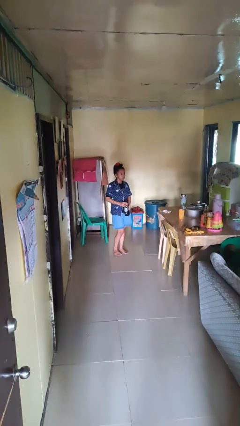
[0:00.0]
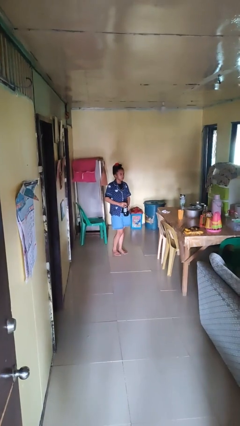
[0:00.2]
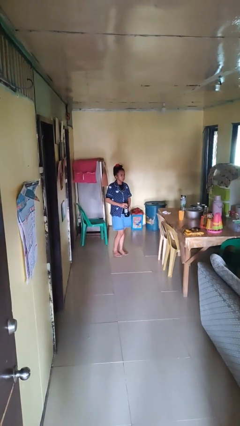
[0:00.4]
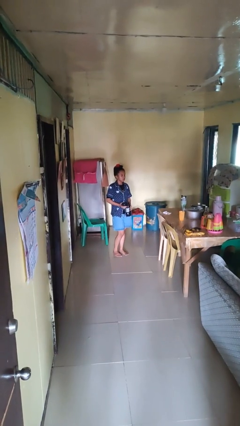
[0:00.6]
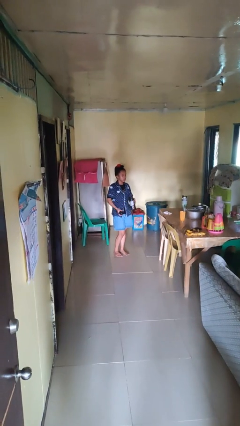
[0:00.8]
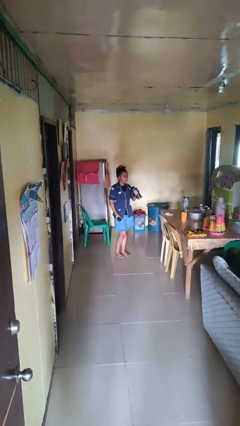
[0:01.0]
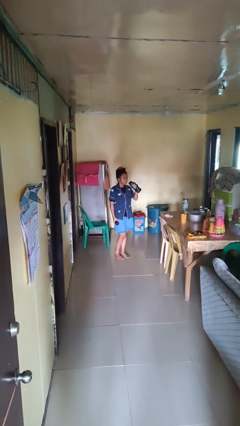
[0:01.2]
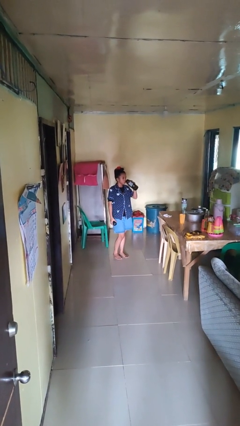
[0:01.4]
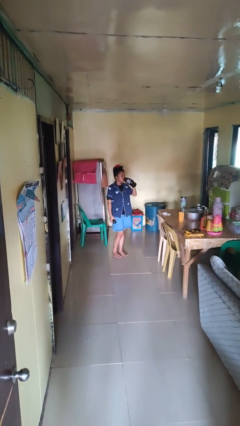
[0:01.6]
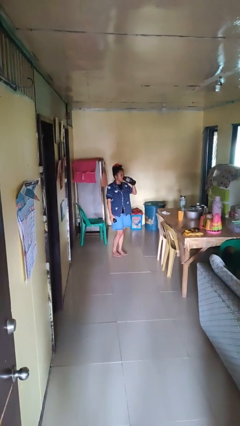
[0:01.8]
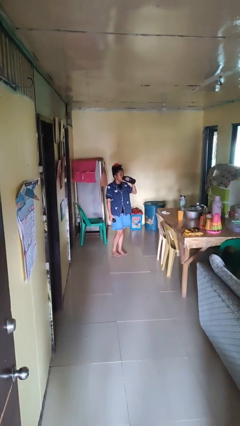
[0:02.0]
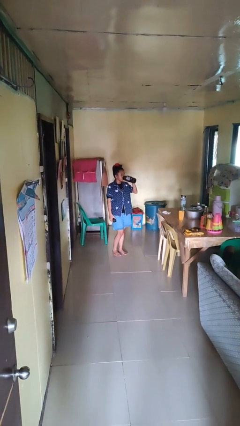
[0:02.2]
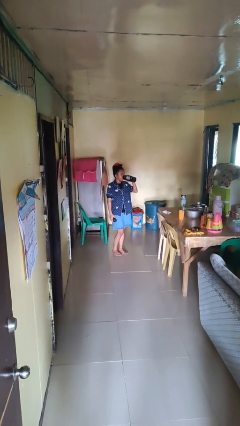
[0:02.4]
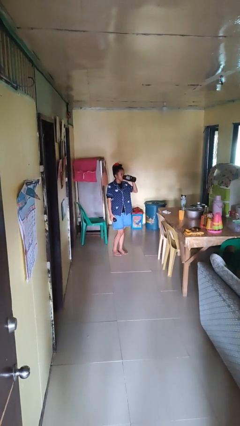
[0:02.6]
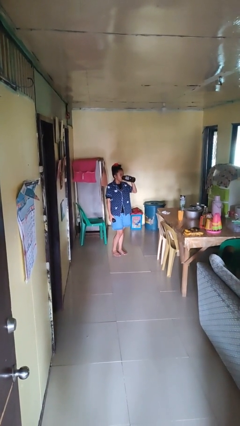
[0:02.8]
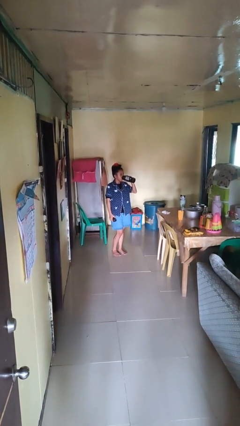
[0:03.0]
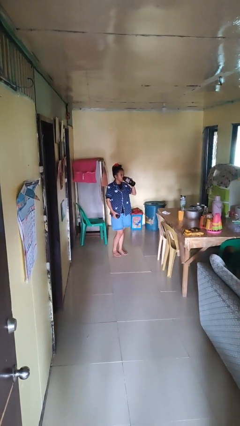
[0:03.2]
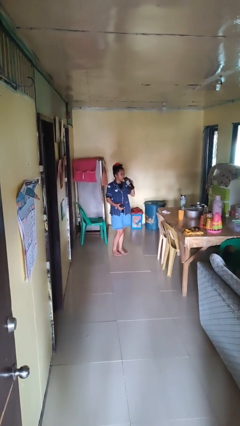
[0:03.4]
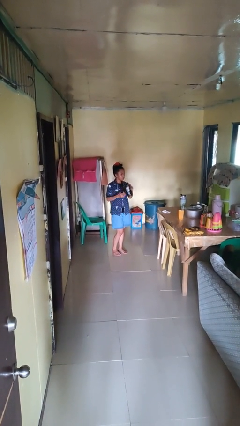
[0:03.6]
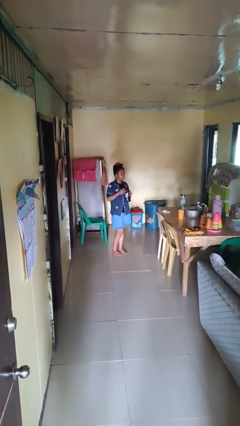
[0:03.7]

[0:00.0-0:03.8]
person drinks from bottle

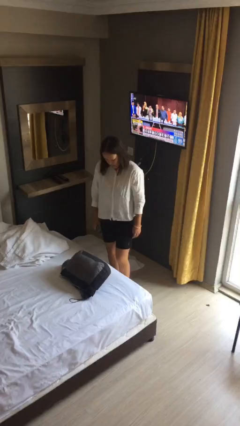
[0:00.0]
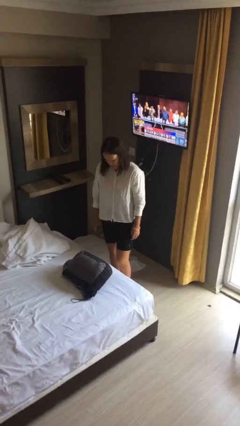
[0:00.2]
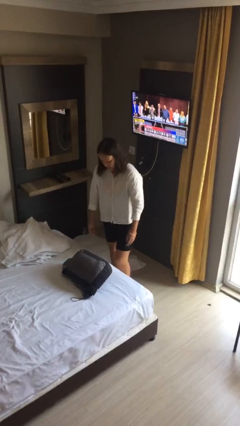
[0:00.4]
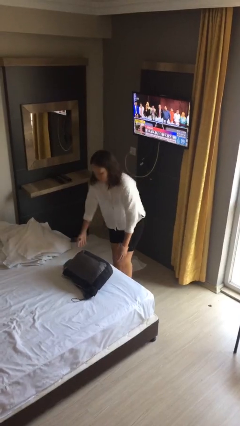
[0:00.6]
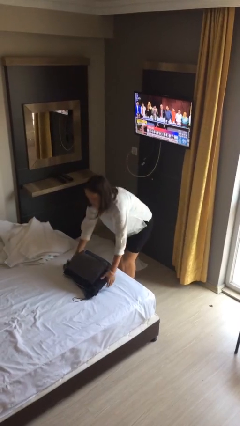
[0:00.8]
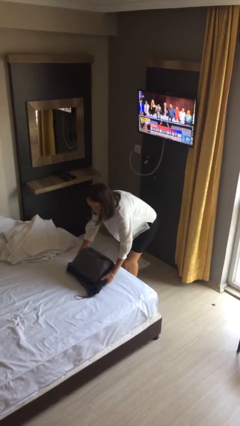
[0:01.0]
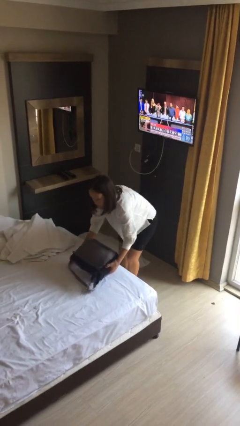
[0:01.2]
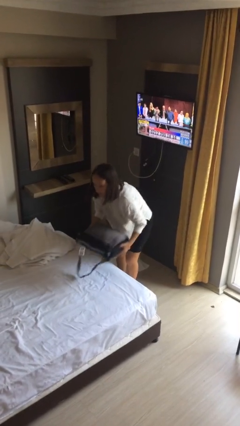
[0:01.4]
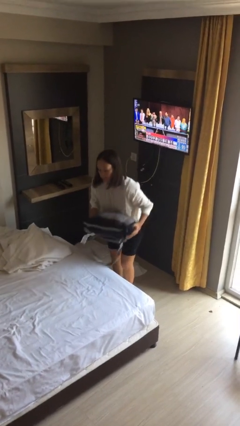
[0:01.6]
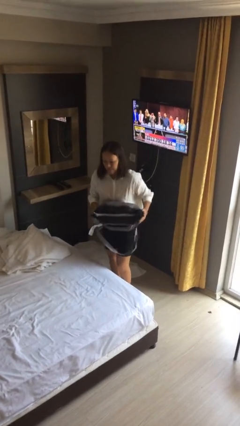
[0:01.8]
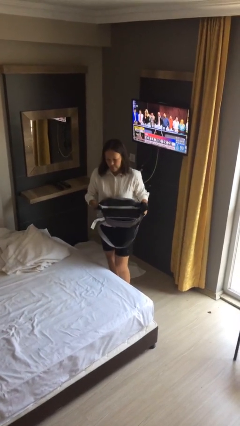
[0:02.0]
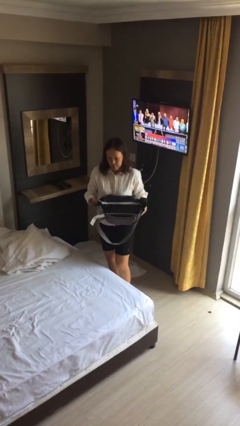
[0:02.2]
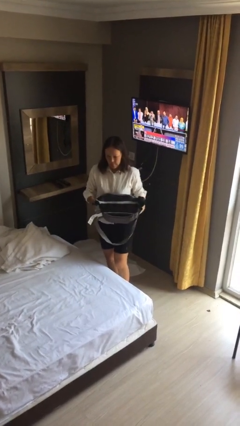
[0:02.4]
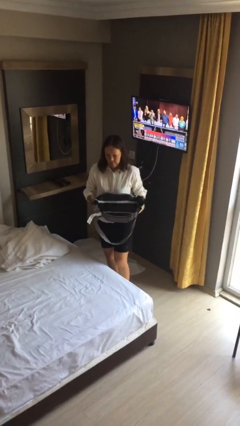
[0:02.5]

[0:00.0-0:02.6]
person picks up object from bed

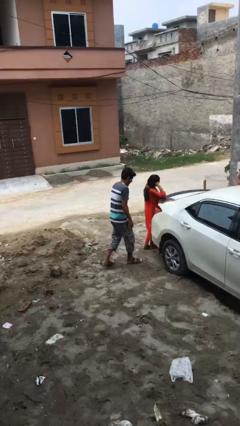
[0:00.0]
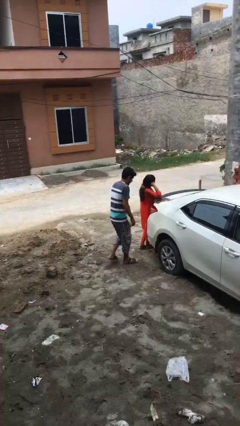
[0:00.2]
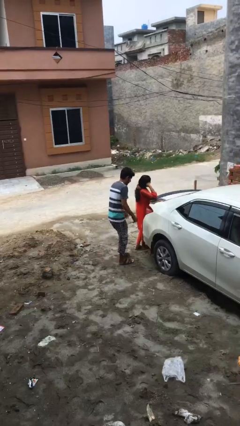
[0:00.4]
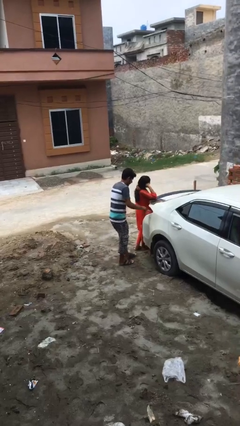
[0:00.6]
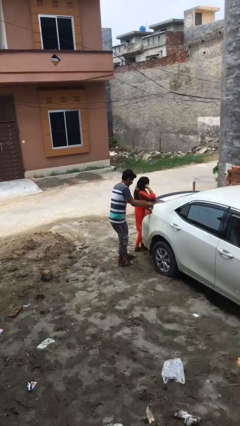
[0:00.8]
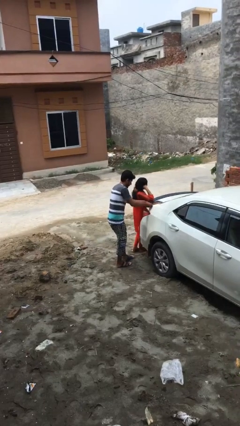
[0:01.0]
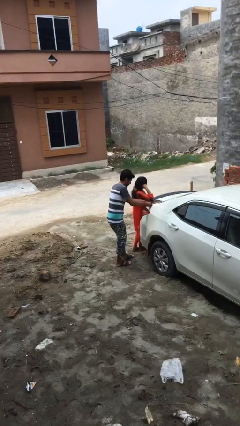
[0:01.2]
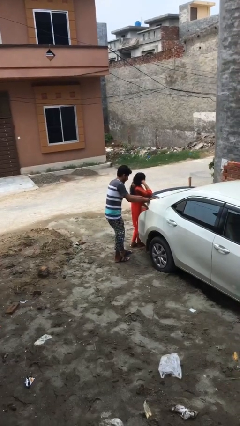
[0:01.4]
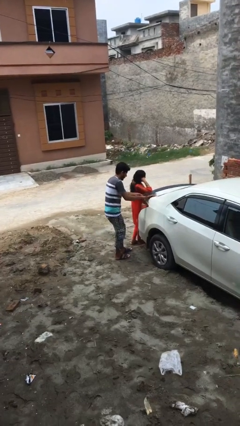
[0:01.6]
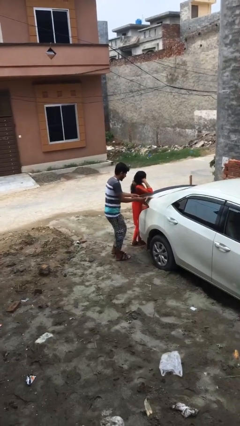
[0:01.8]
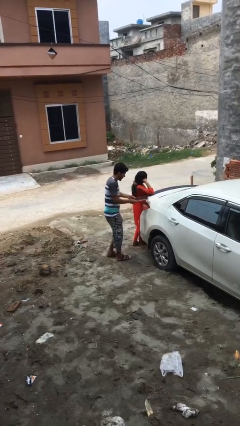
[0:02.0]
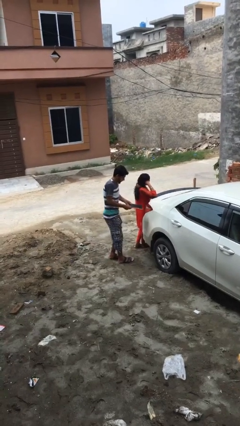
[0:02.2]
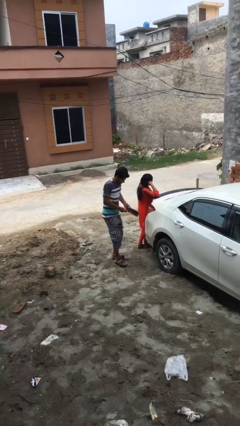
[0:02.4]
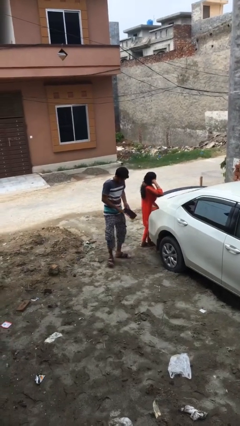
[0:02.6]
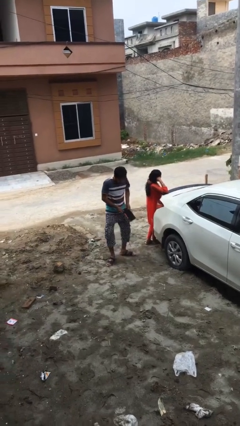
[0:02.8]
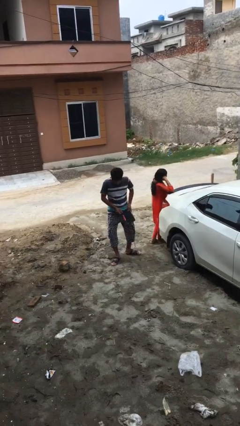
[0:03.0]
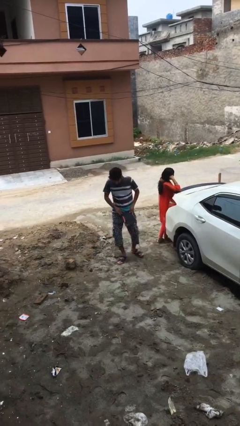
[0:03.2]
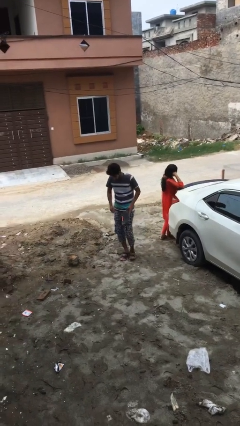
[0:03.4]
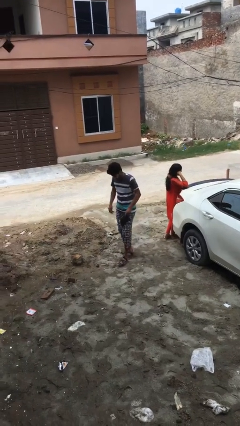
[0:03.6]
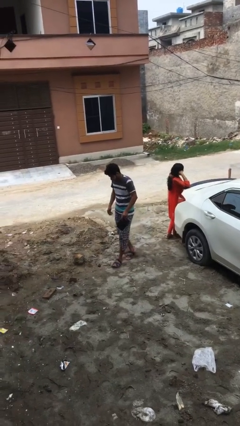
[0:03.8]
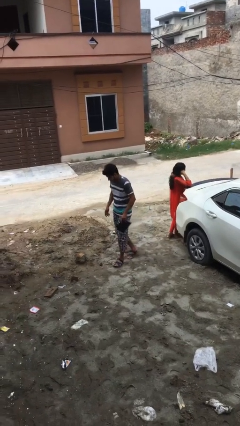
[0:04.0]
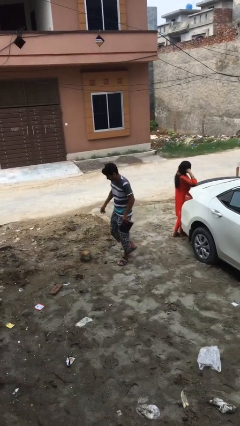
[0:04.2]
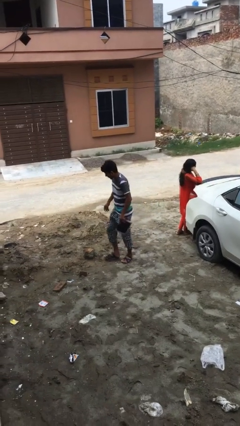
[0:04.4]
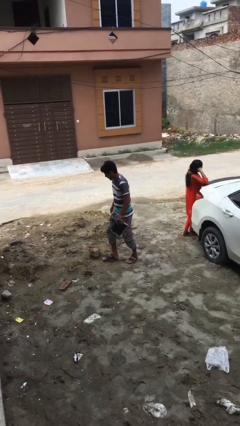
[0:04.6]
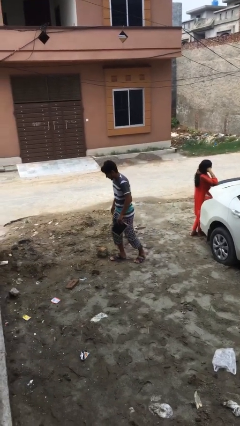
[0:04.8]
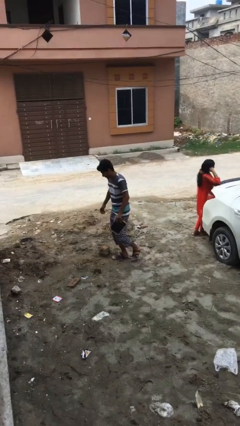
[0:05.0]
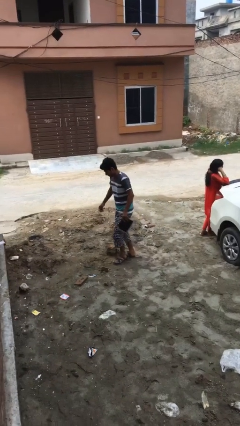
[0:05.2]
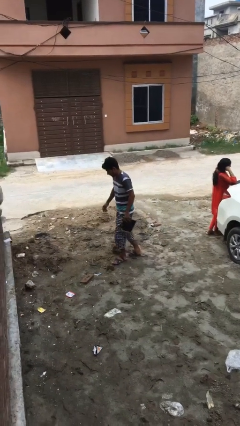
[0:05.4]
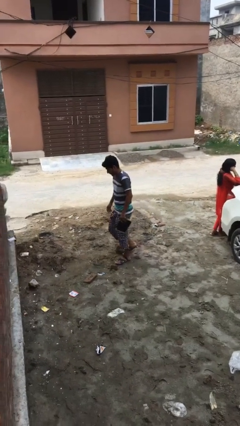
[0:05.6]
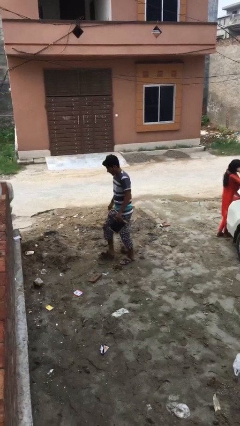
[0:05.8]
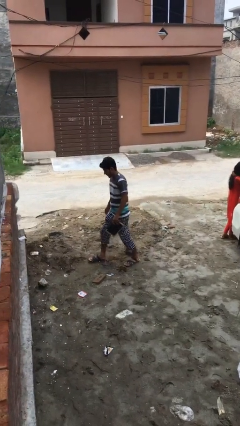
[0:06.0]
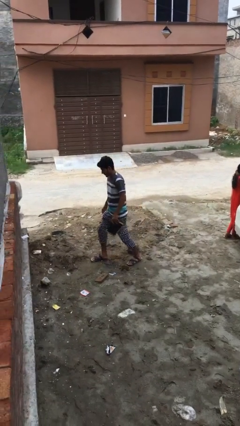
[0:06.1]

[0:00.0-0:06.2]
person steals object from person

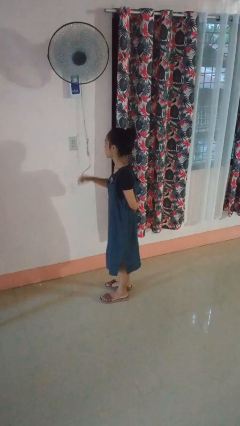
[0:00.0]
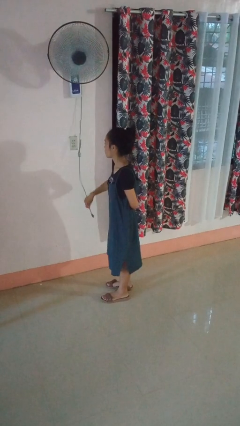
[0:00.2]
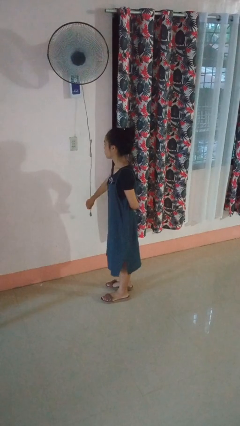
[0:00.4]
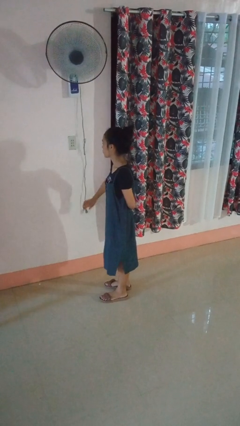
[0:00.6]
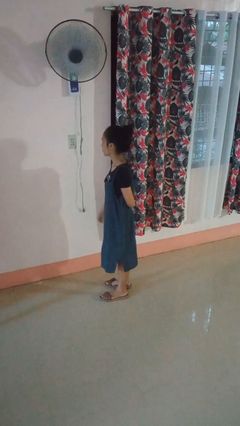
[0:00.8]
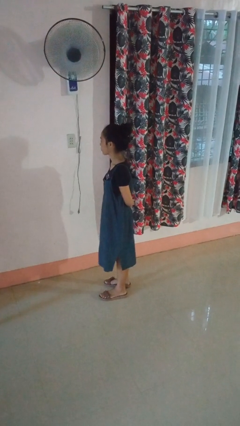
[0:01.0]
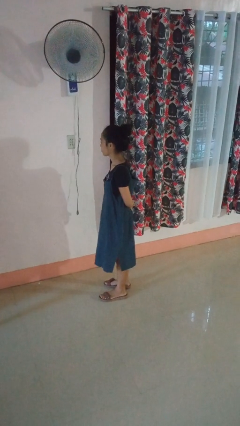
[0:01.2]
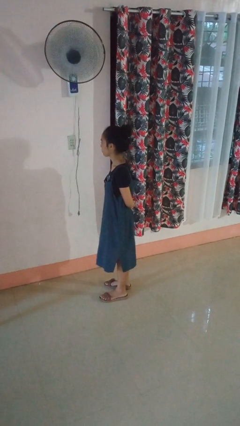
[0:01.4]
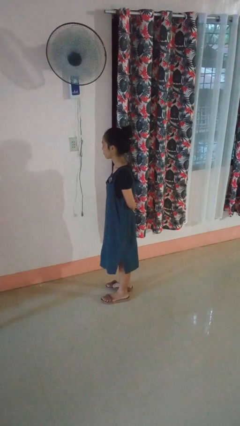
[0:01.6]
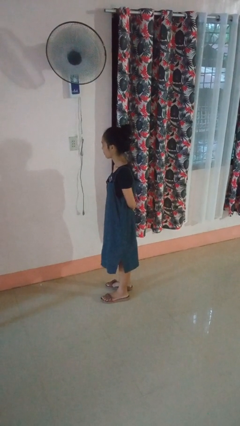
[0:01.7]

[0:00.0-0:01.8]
person unplugs from electrical socket

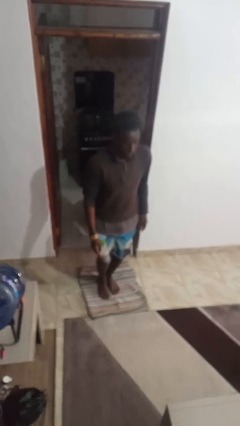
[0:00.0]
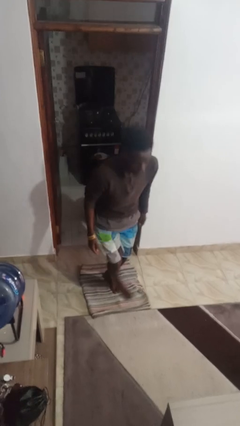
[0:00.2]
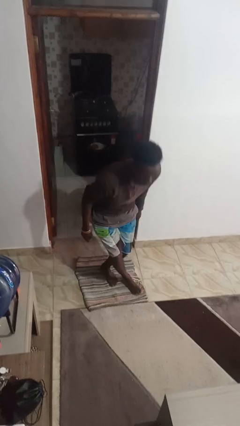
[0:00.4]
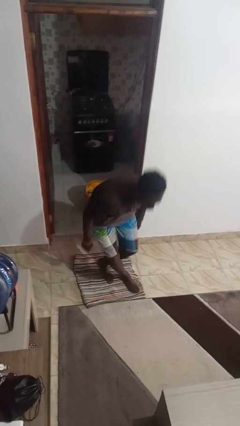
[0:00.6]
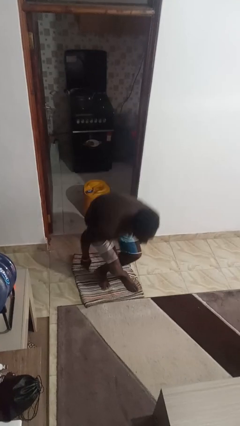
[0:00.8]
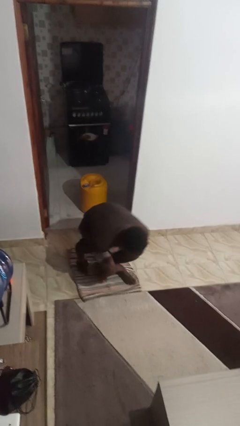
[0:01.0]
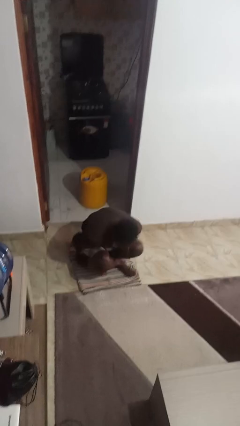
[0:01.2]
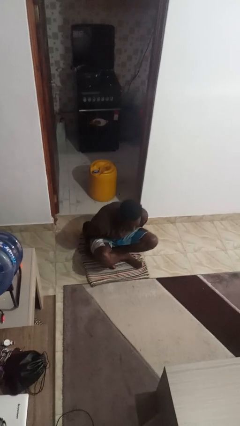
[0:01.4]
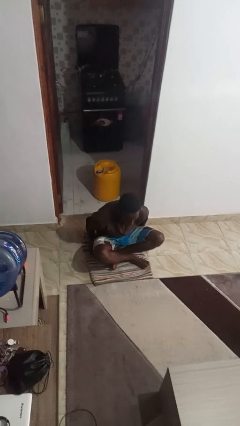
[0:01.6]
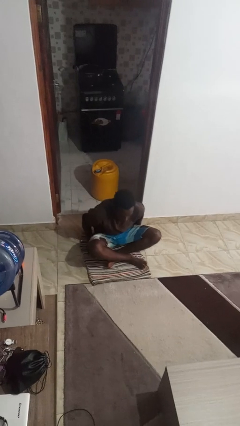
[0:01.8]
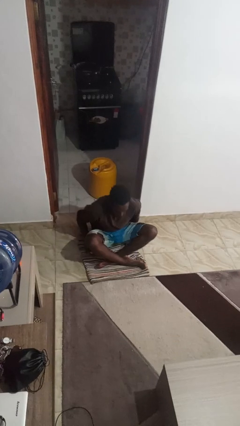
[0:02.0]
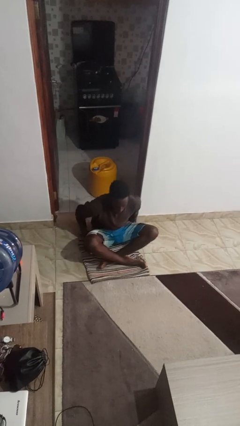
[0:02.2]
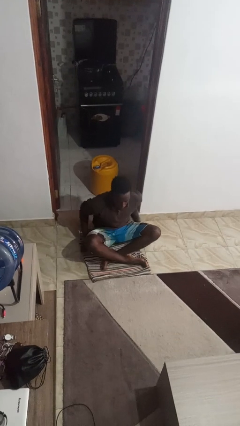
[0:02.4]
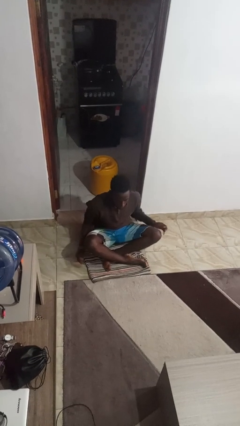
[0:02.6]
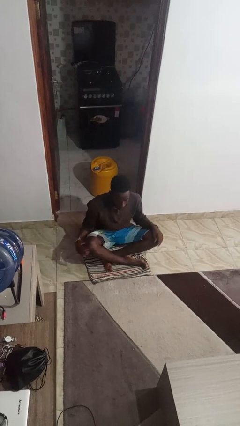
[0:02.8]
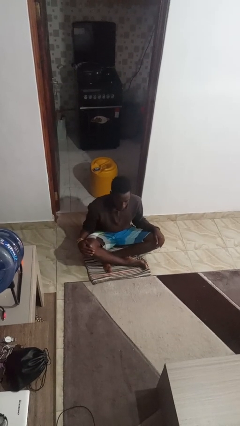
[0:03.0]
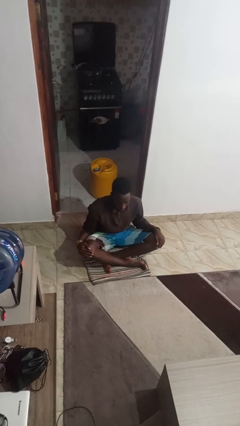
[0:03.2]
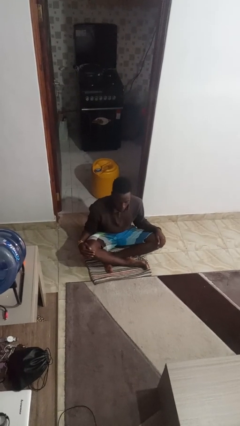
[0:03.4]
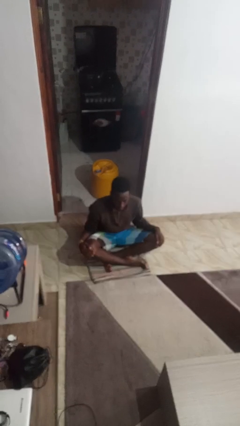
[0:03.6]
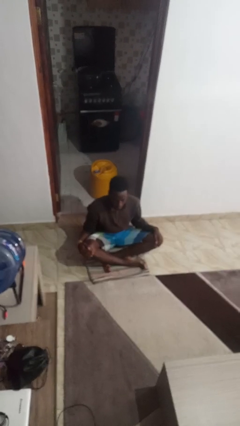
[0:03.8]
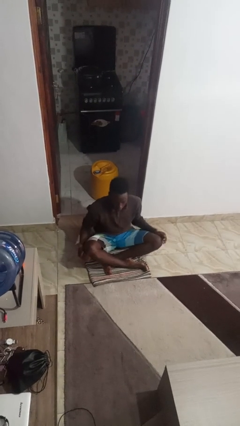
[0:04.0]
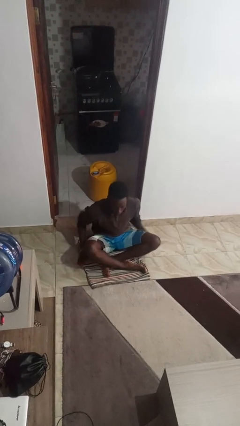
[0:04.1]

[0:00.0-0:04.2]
person sits crisscross
